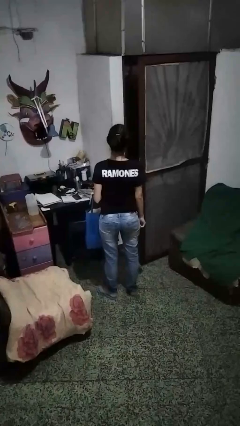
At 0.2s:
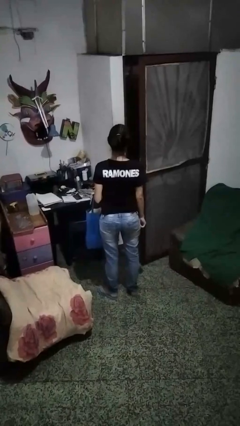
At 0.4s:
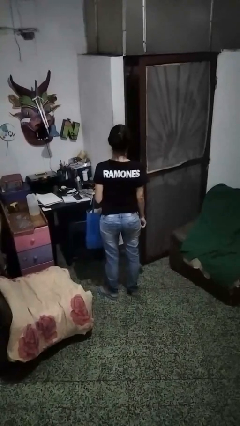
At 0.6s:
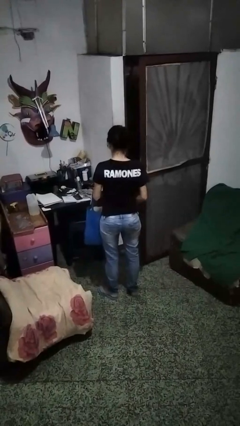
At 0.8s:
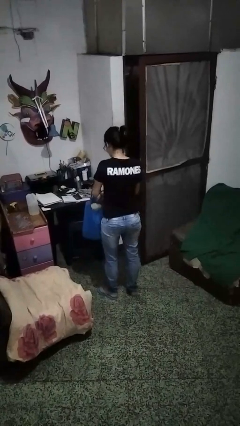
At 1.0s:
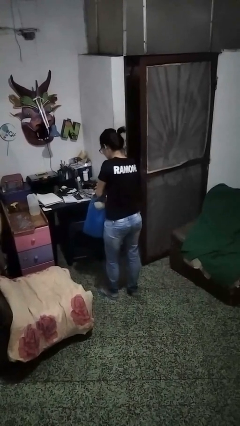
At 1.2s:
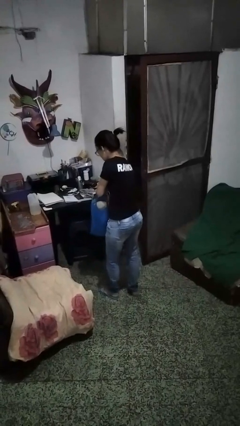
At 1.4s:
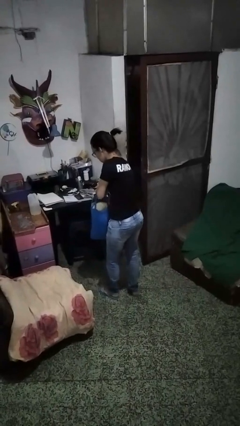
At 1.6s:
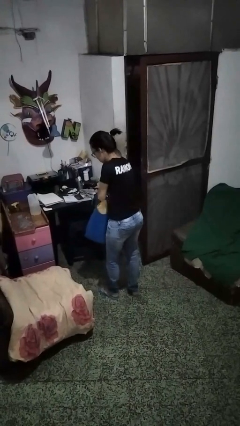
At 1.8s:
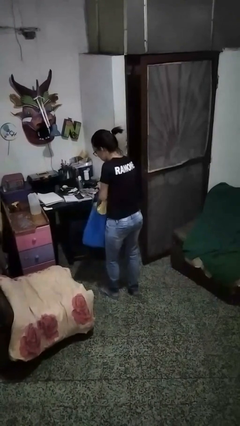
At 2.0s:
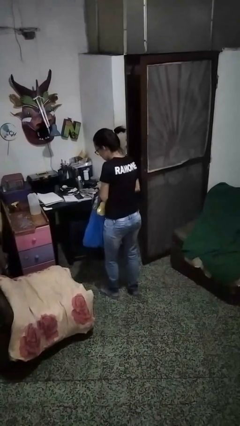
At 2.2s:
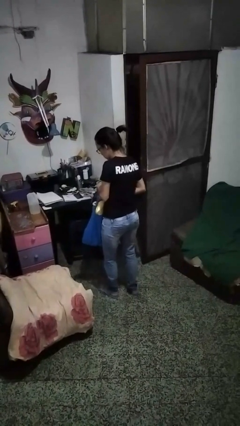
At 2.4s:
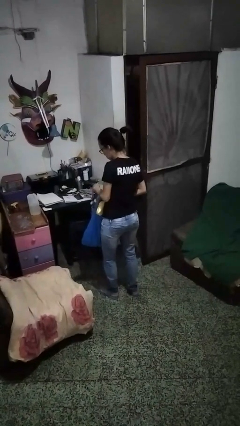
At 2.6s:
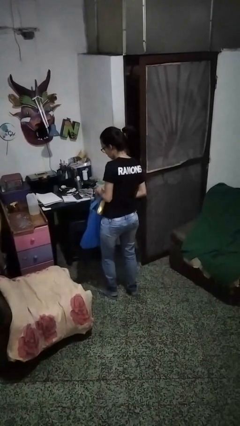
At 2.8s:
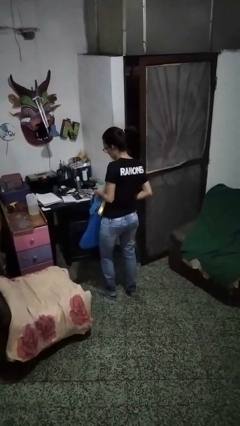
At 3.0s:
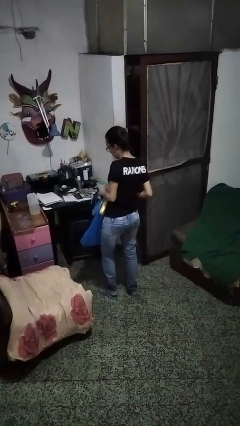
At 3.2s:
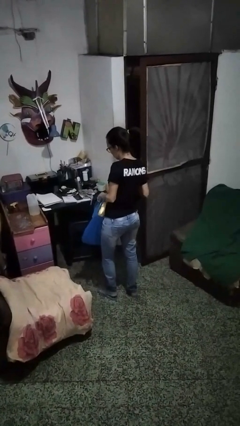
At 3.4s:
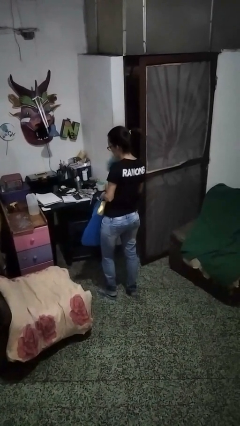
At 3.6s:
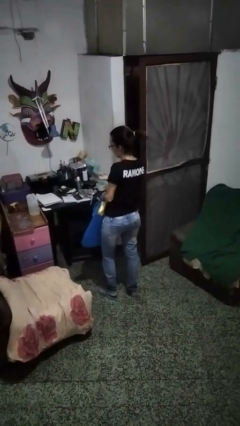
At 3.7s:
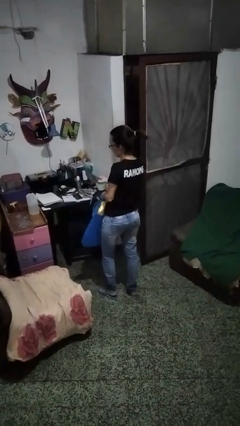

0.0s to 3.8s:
person takes object from bag

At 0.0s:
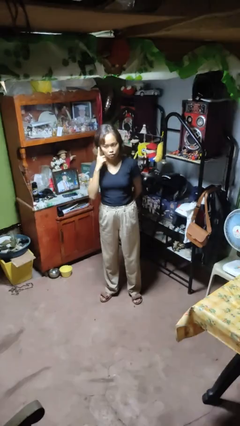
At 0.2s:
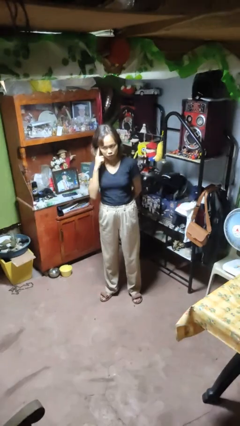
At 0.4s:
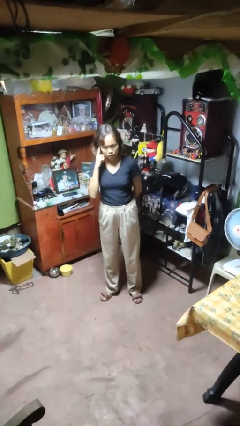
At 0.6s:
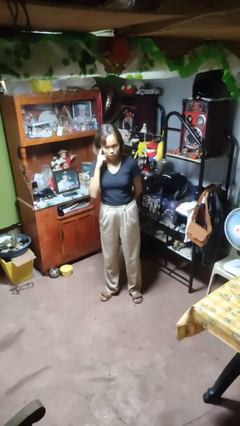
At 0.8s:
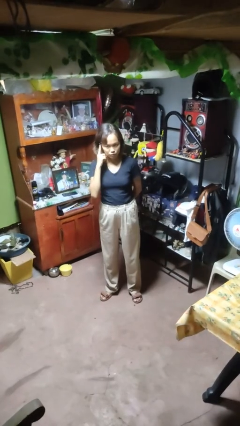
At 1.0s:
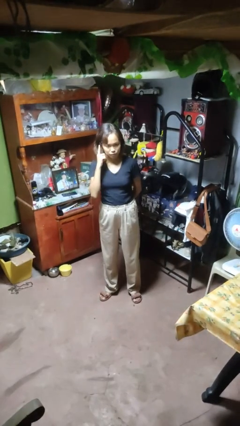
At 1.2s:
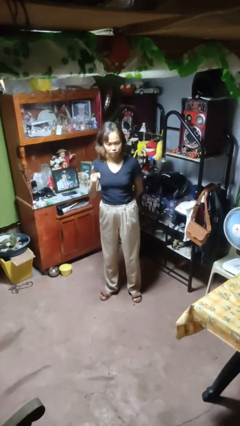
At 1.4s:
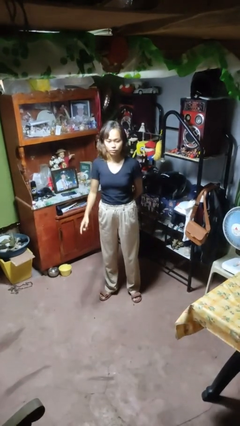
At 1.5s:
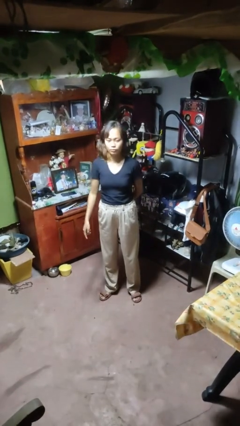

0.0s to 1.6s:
person gestures listen closely

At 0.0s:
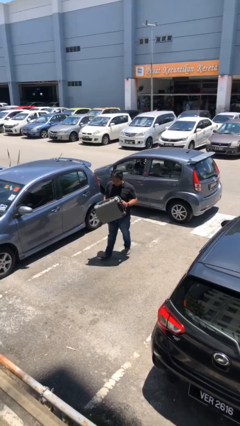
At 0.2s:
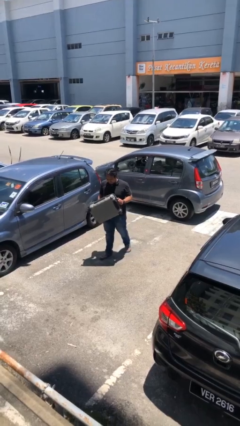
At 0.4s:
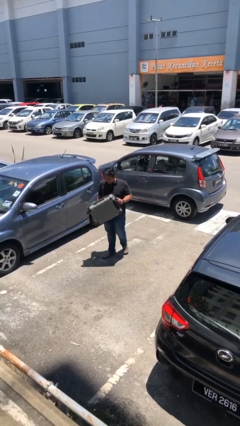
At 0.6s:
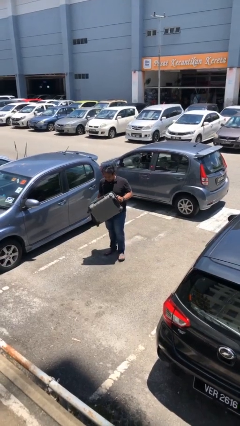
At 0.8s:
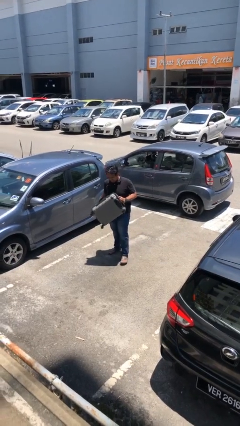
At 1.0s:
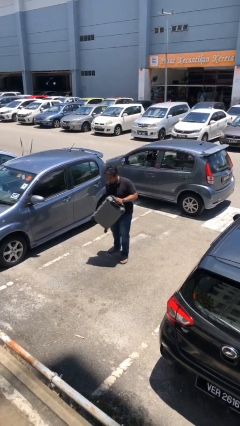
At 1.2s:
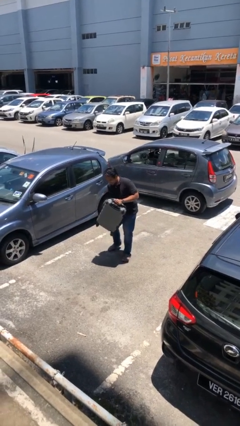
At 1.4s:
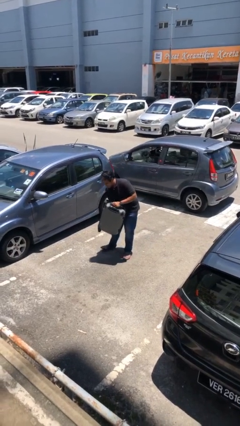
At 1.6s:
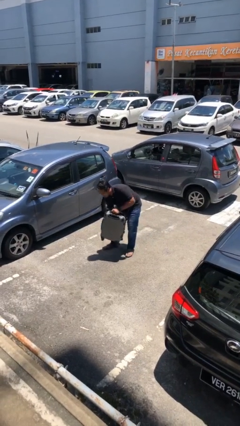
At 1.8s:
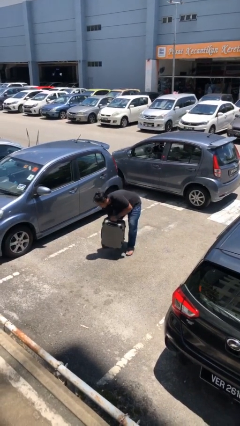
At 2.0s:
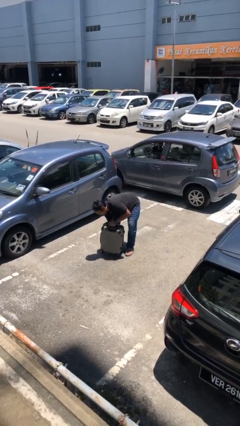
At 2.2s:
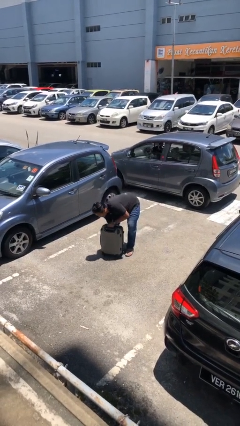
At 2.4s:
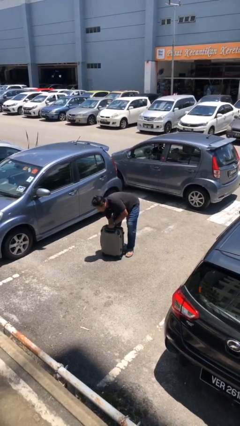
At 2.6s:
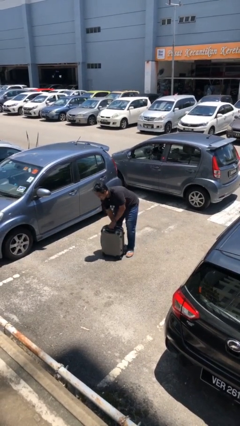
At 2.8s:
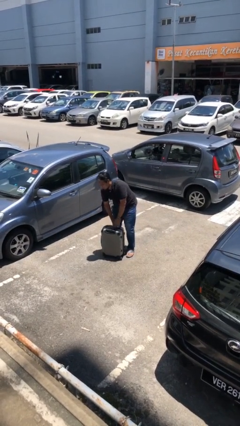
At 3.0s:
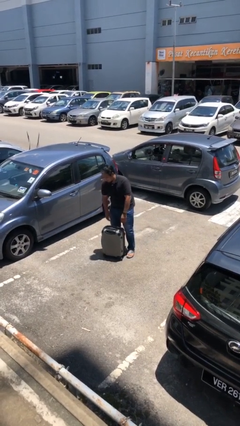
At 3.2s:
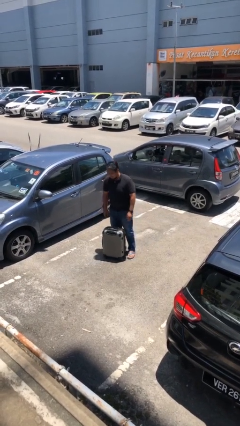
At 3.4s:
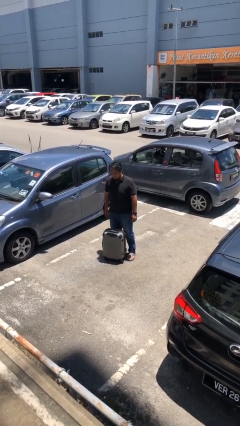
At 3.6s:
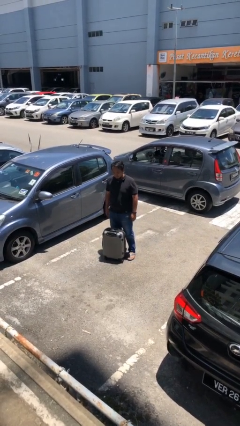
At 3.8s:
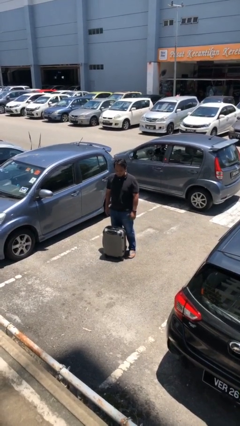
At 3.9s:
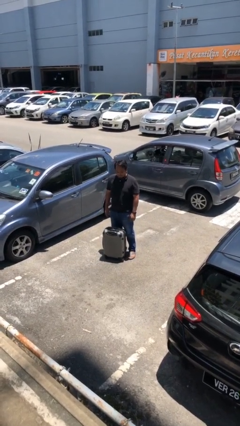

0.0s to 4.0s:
person puts down object on floor

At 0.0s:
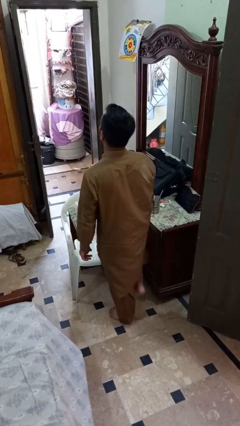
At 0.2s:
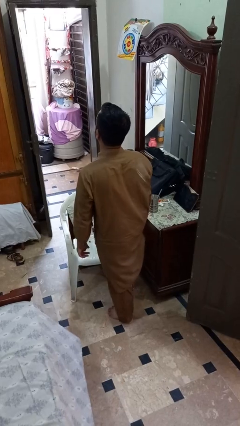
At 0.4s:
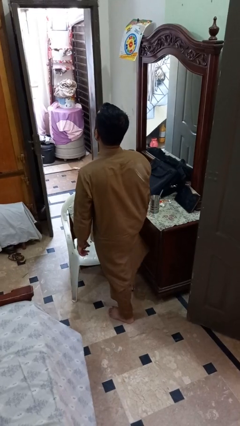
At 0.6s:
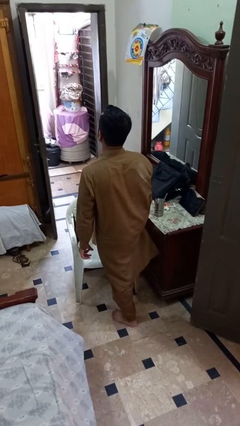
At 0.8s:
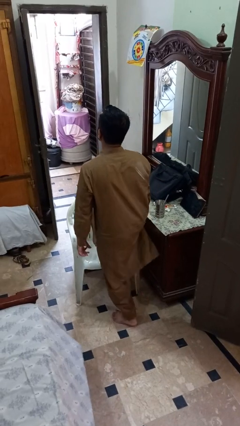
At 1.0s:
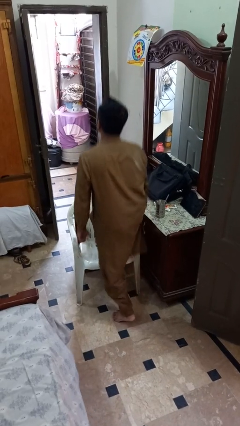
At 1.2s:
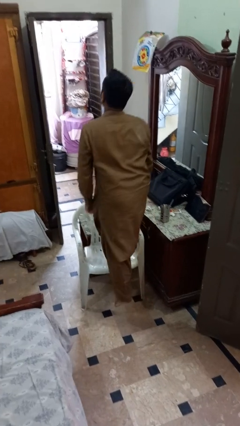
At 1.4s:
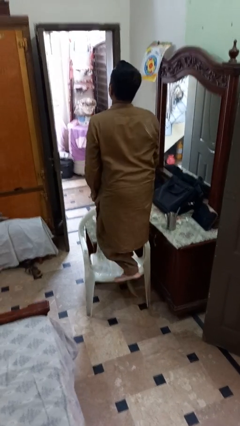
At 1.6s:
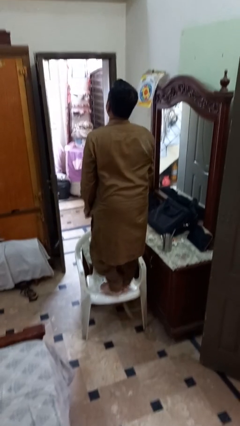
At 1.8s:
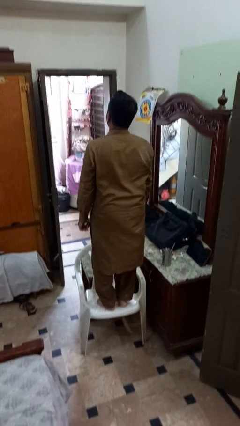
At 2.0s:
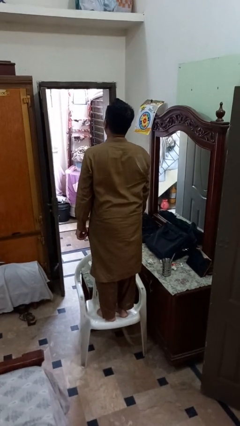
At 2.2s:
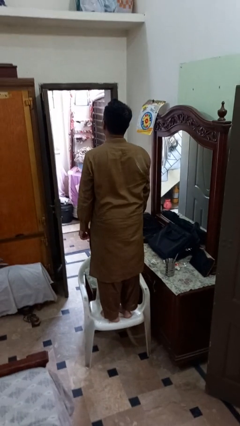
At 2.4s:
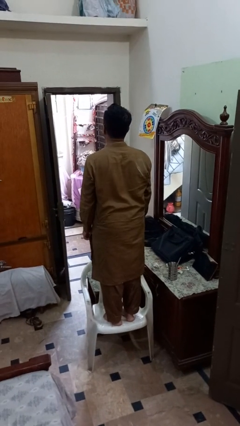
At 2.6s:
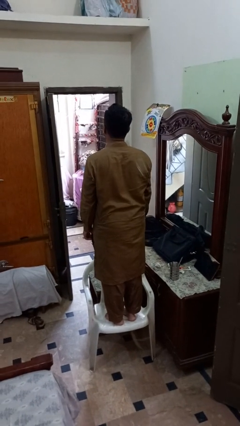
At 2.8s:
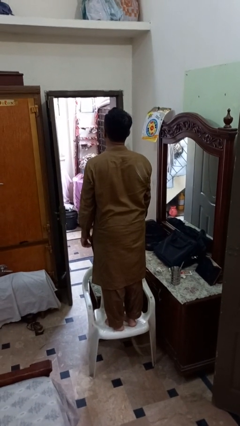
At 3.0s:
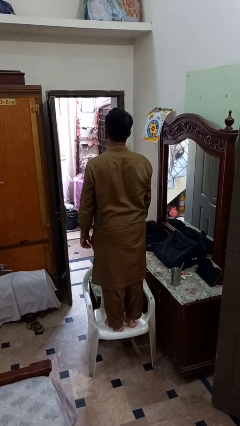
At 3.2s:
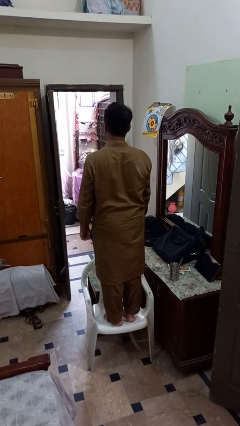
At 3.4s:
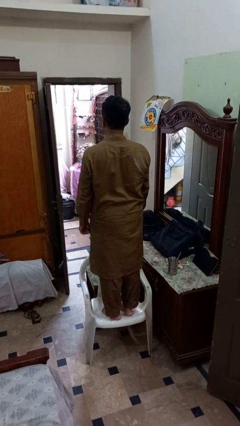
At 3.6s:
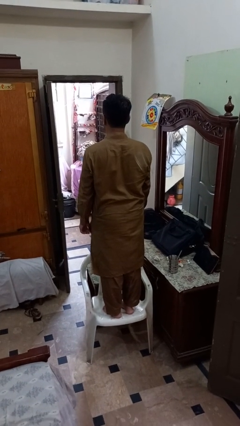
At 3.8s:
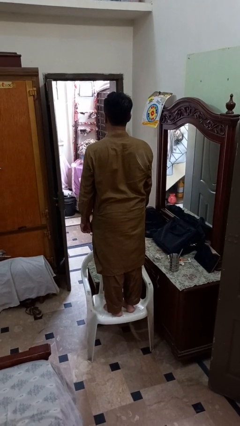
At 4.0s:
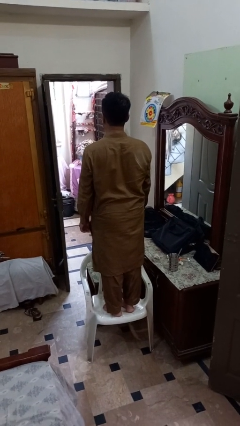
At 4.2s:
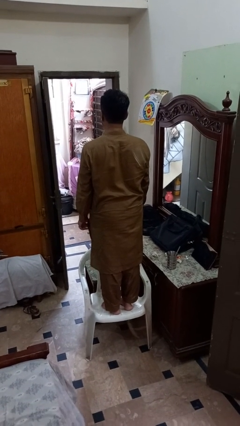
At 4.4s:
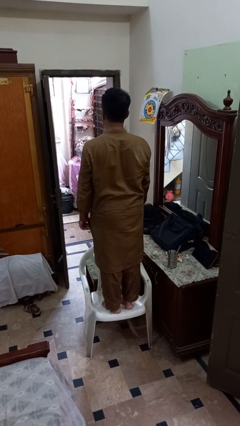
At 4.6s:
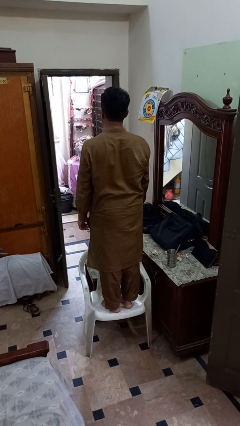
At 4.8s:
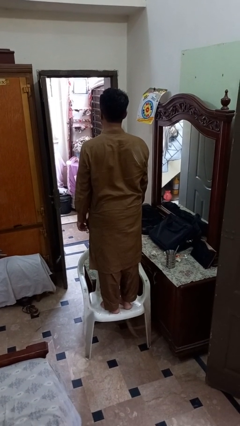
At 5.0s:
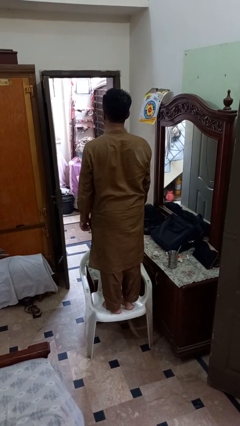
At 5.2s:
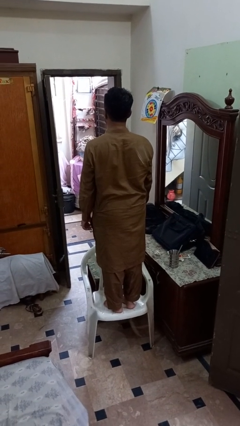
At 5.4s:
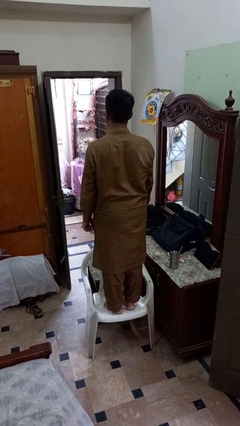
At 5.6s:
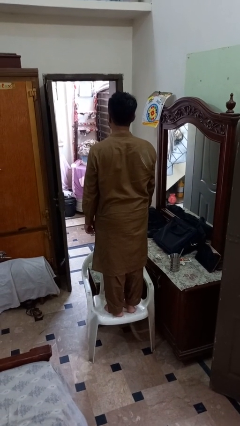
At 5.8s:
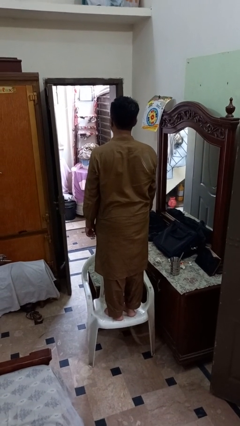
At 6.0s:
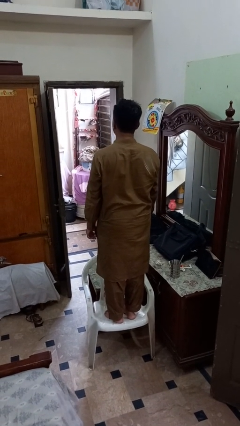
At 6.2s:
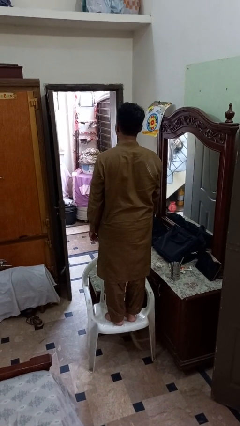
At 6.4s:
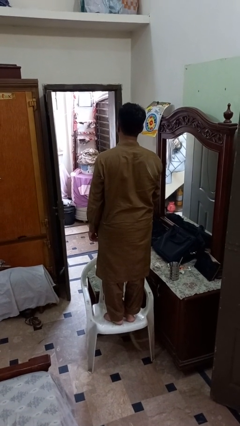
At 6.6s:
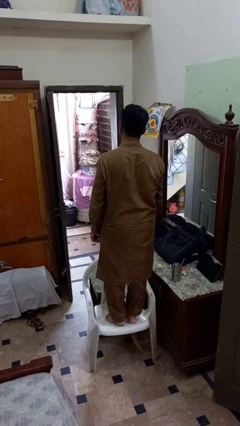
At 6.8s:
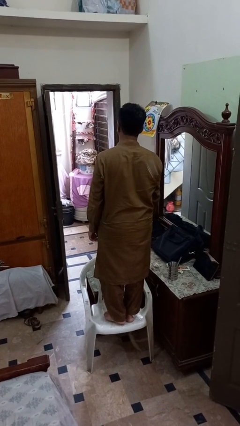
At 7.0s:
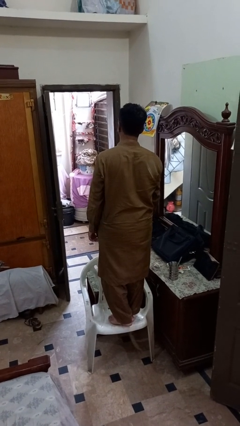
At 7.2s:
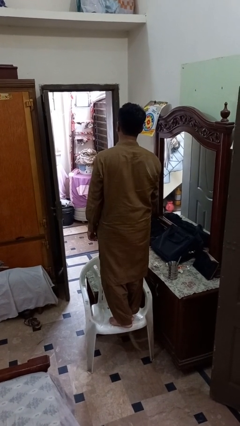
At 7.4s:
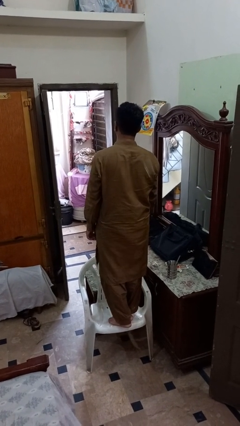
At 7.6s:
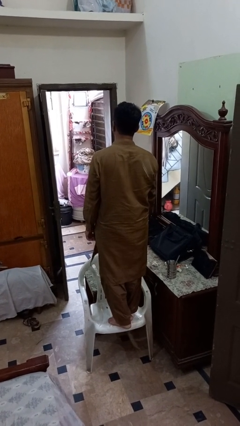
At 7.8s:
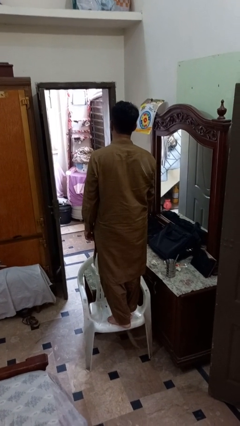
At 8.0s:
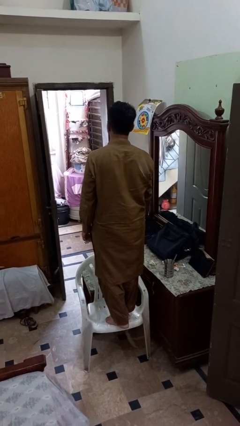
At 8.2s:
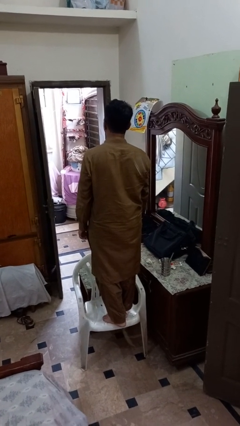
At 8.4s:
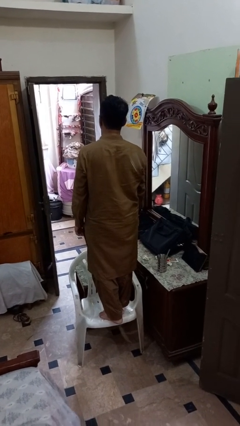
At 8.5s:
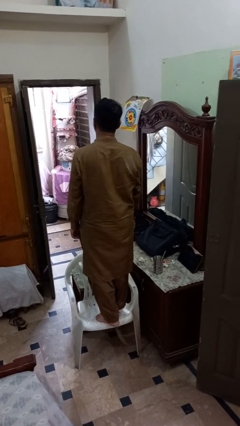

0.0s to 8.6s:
person climbs on chair
